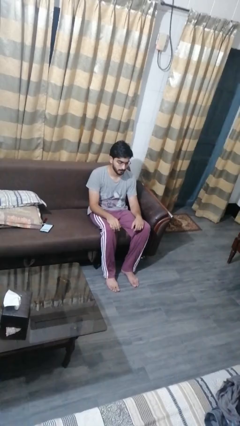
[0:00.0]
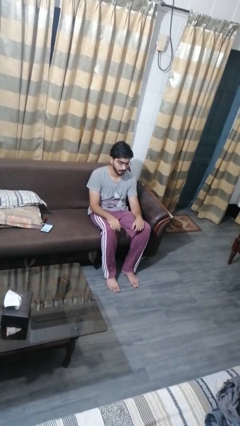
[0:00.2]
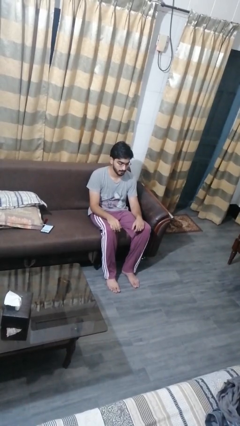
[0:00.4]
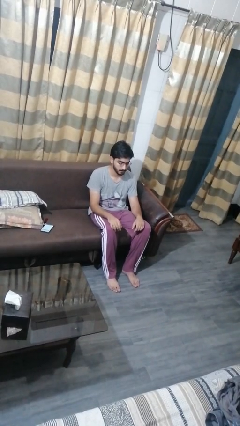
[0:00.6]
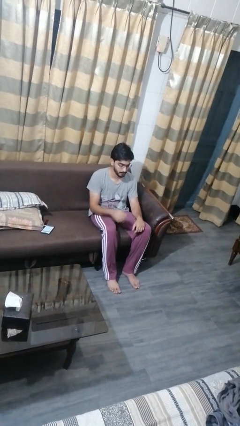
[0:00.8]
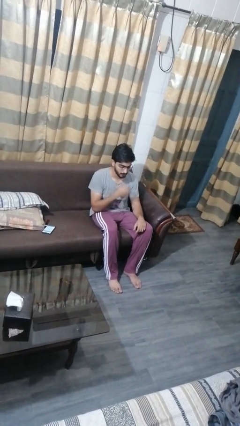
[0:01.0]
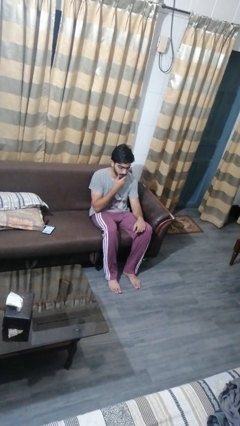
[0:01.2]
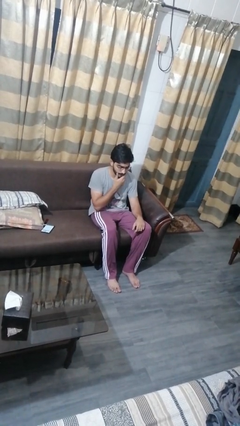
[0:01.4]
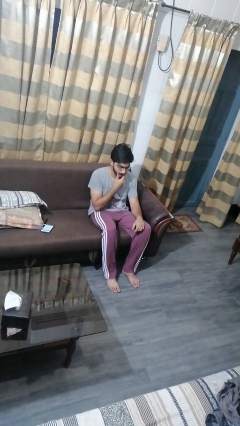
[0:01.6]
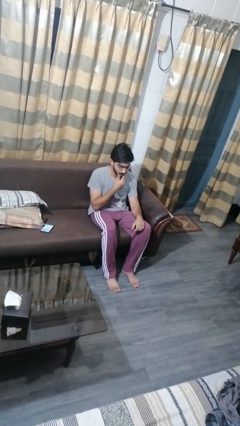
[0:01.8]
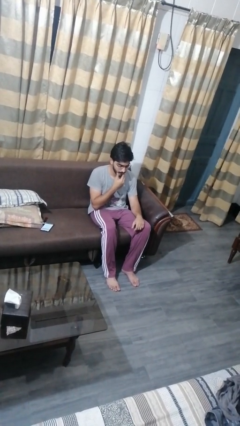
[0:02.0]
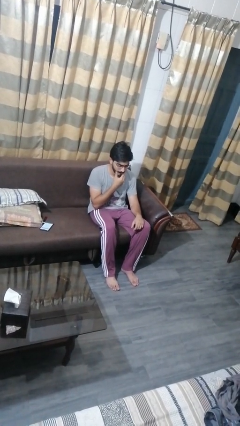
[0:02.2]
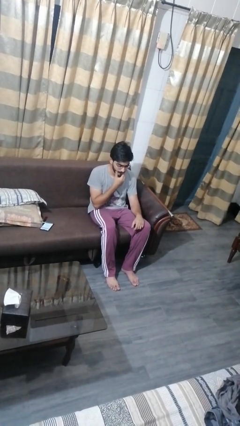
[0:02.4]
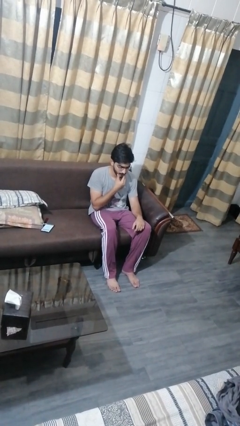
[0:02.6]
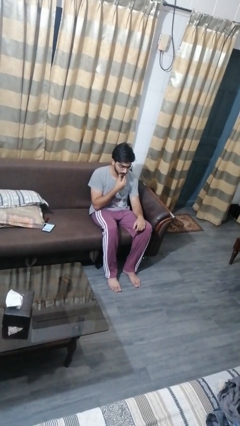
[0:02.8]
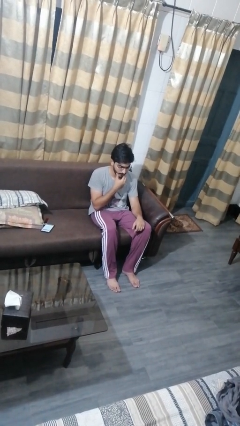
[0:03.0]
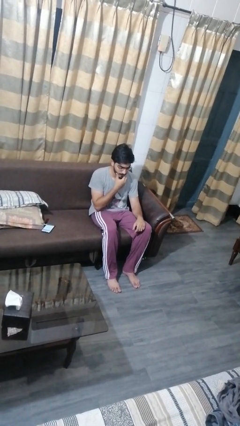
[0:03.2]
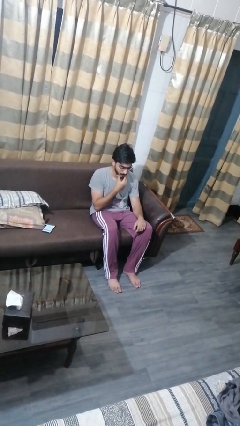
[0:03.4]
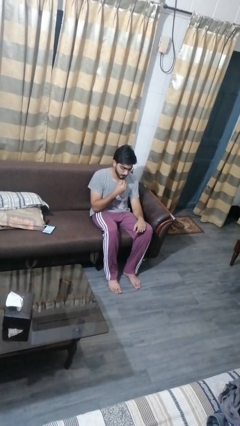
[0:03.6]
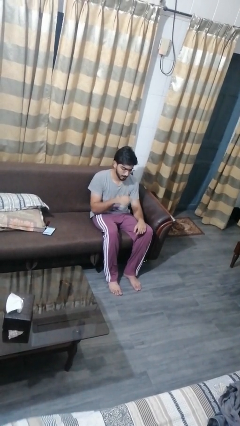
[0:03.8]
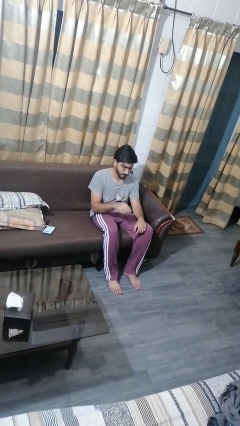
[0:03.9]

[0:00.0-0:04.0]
person strokes chin

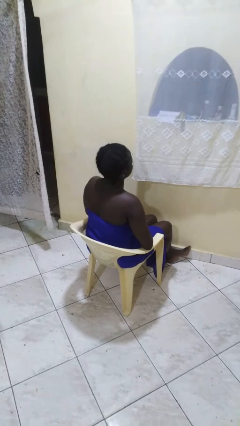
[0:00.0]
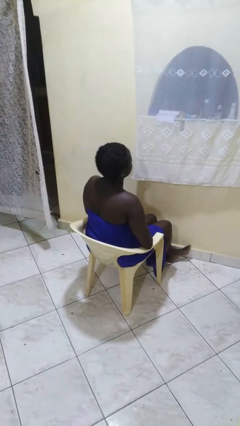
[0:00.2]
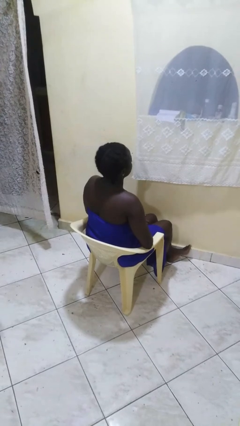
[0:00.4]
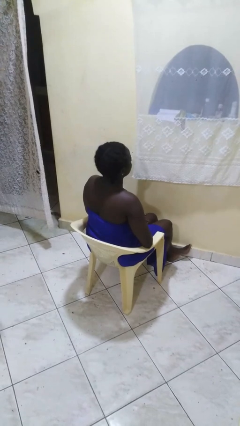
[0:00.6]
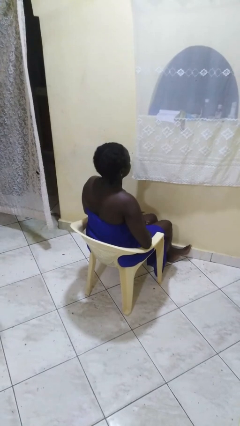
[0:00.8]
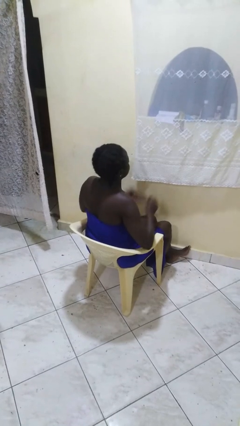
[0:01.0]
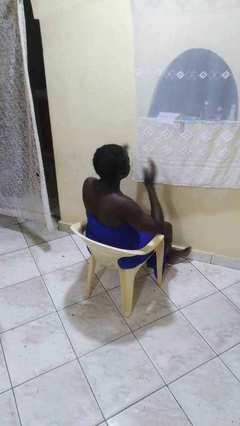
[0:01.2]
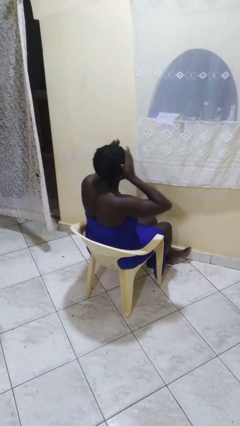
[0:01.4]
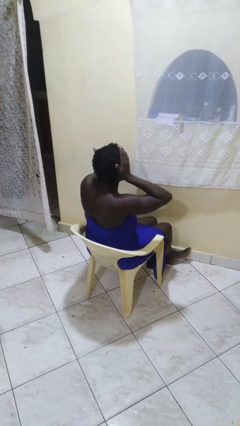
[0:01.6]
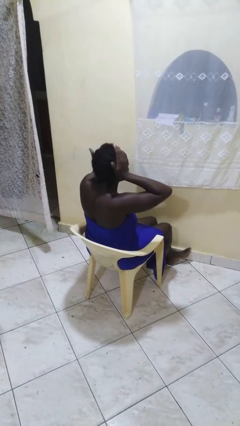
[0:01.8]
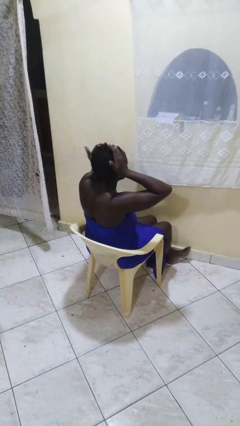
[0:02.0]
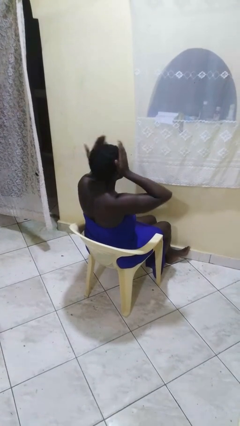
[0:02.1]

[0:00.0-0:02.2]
person strokes hair

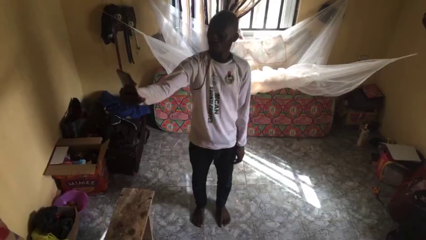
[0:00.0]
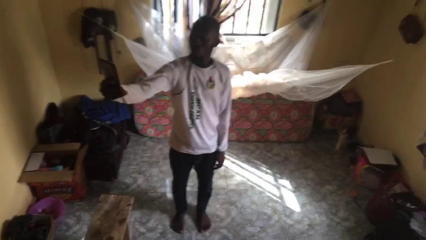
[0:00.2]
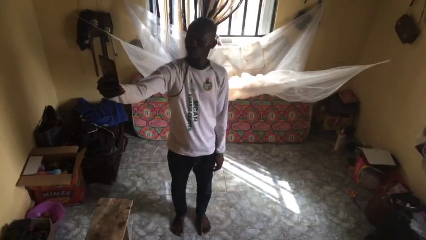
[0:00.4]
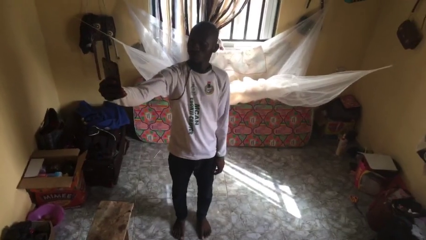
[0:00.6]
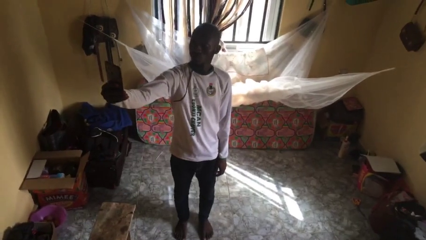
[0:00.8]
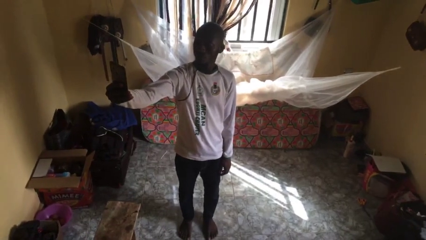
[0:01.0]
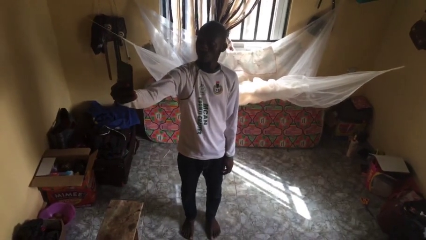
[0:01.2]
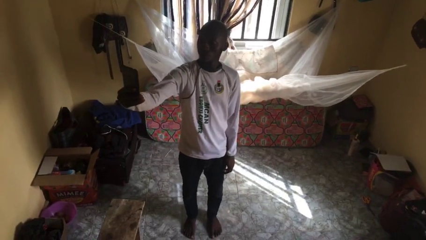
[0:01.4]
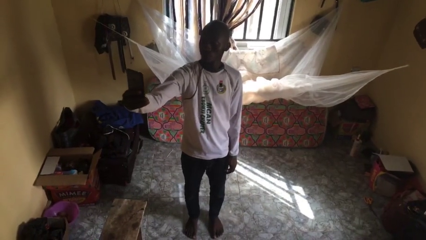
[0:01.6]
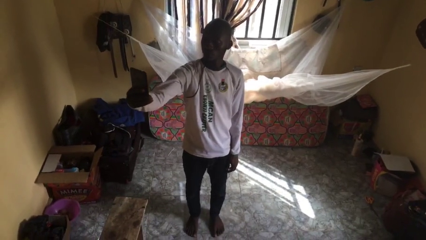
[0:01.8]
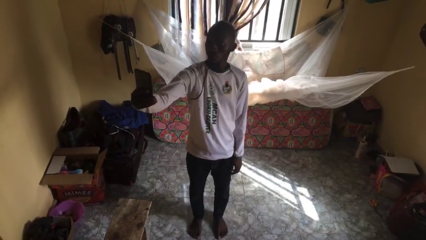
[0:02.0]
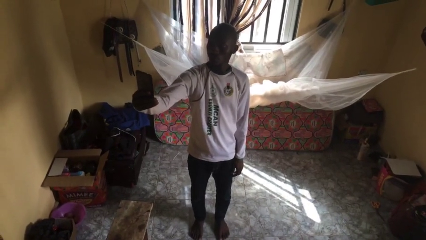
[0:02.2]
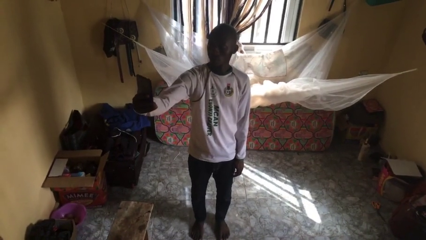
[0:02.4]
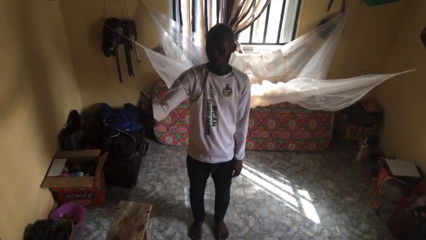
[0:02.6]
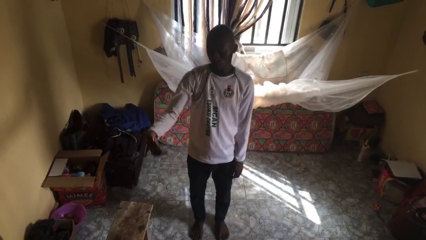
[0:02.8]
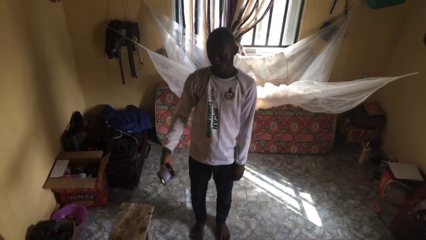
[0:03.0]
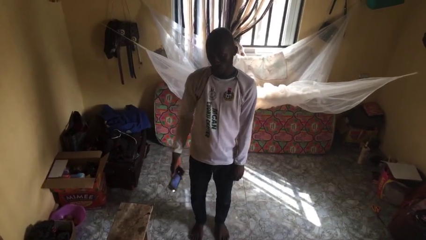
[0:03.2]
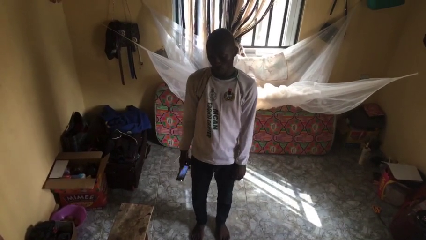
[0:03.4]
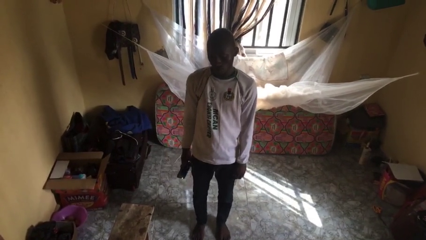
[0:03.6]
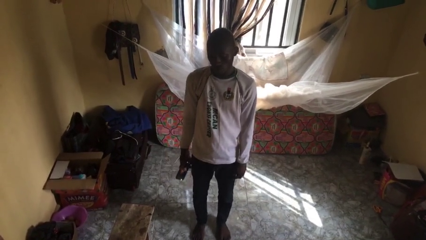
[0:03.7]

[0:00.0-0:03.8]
person takes selfie

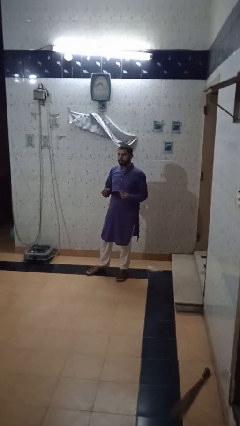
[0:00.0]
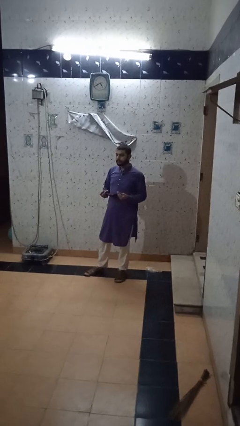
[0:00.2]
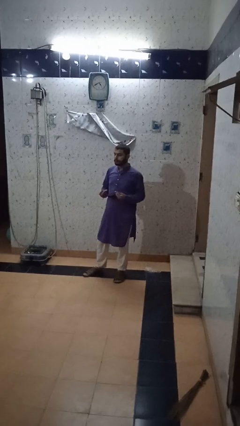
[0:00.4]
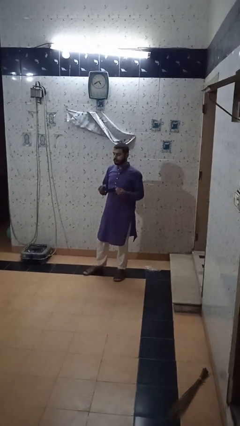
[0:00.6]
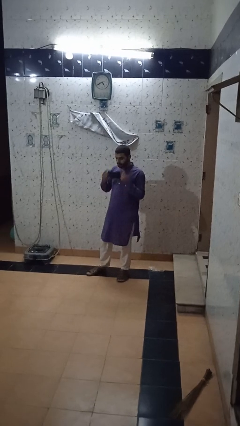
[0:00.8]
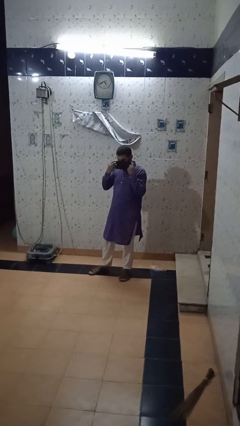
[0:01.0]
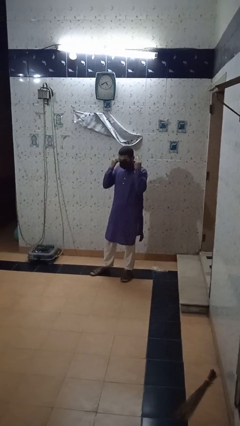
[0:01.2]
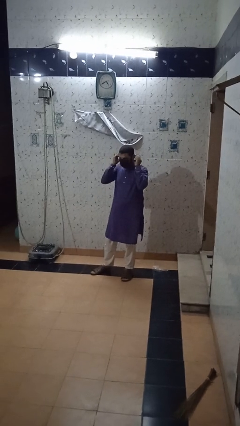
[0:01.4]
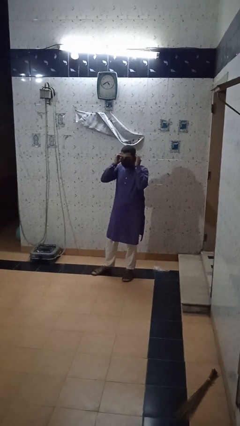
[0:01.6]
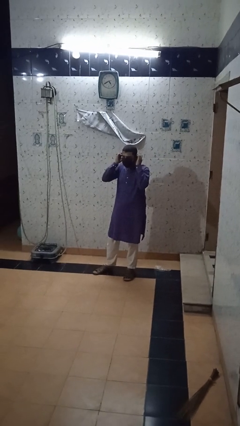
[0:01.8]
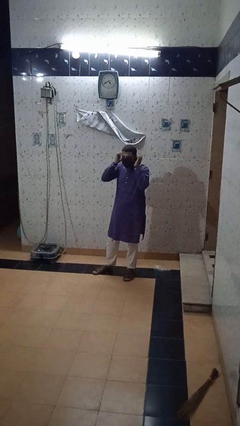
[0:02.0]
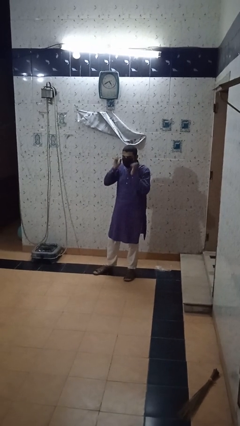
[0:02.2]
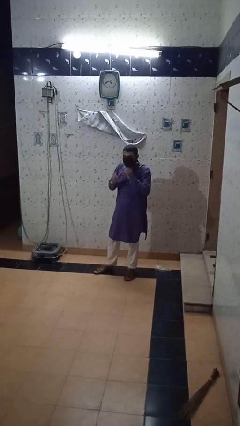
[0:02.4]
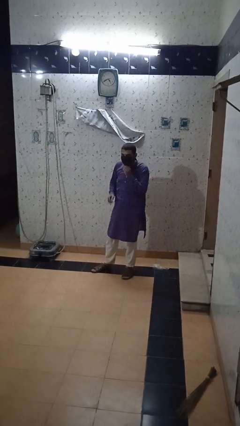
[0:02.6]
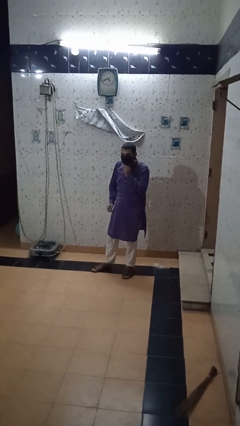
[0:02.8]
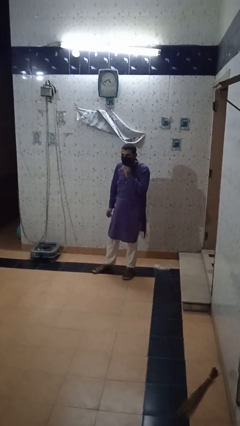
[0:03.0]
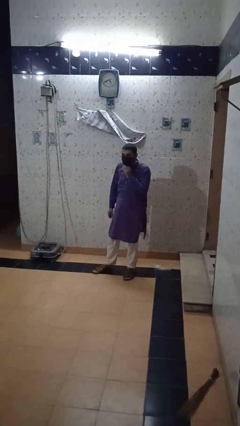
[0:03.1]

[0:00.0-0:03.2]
person puts on facemask

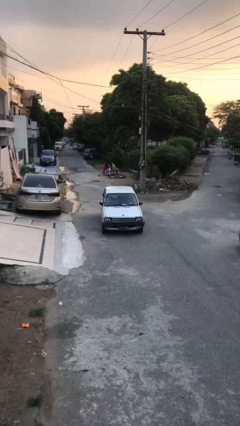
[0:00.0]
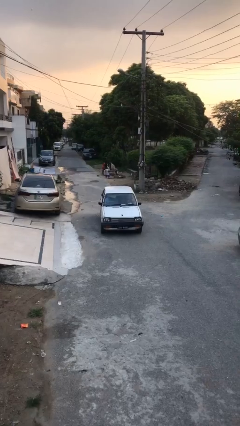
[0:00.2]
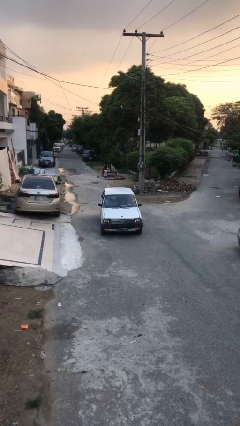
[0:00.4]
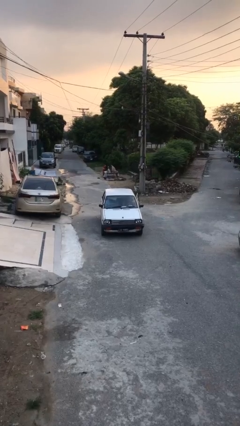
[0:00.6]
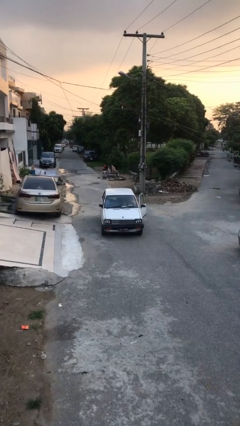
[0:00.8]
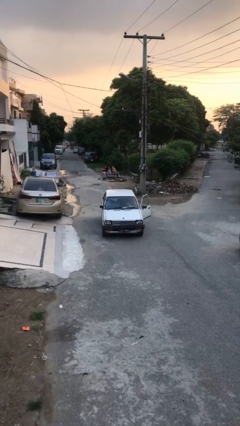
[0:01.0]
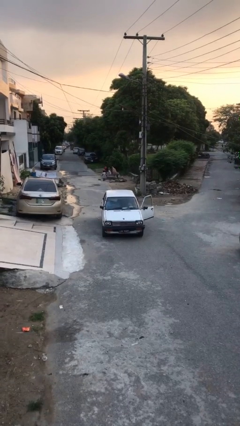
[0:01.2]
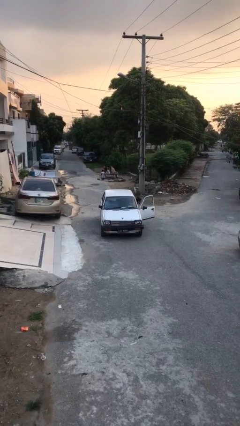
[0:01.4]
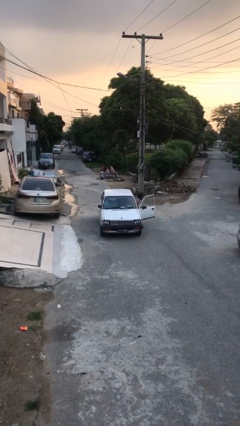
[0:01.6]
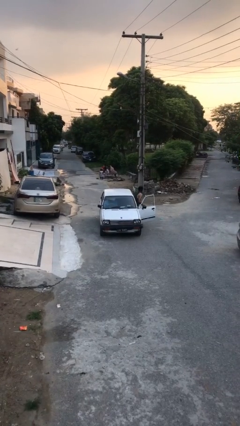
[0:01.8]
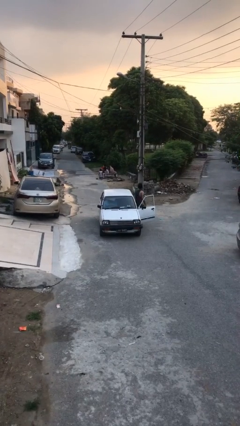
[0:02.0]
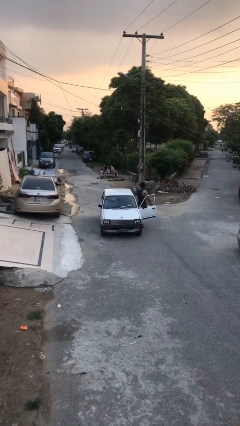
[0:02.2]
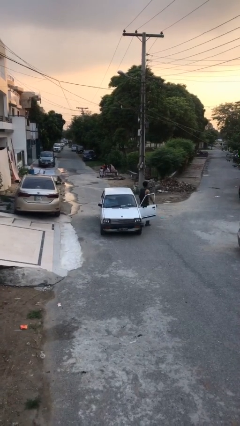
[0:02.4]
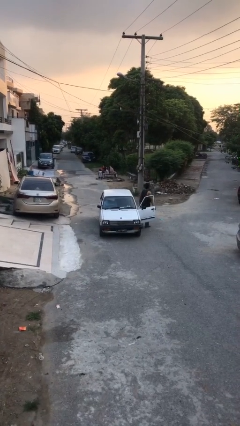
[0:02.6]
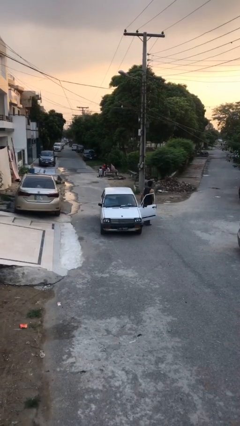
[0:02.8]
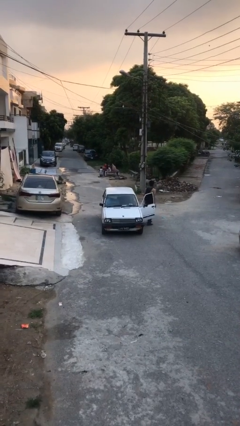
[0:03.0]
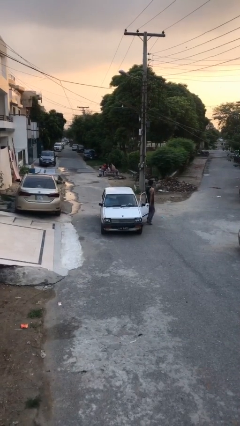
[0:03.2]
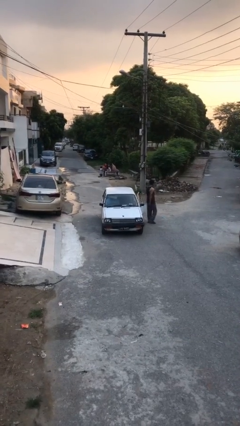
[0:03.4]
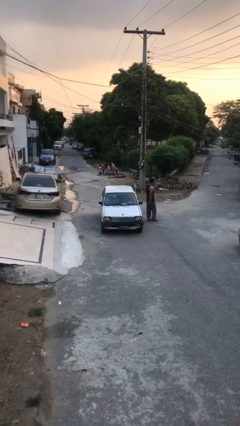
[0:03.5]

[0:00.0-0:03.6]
car drops off person

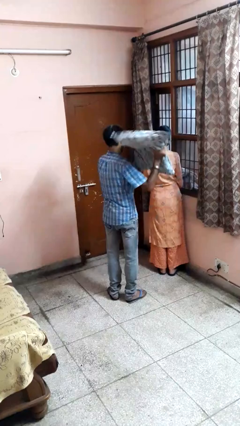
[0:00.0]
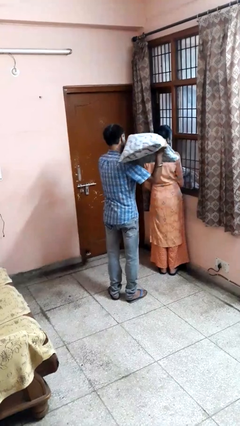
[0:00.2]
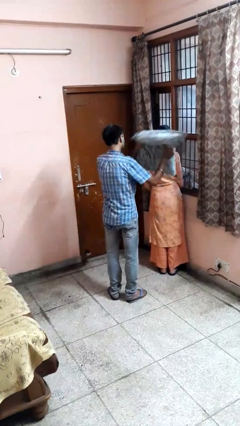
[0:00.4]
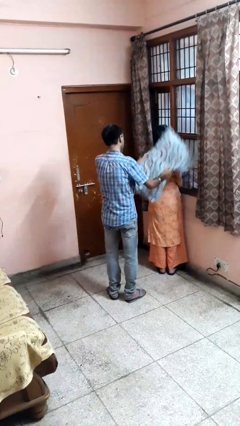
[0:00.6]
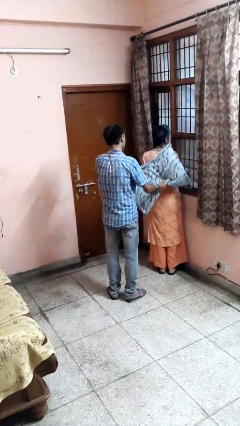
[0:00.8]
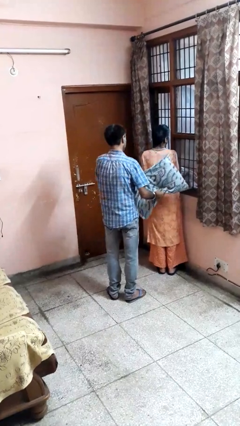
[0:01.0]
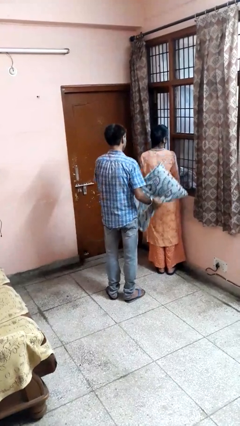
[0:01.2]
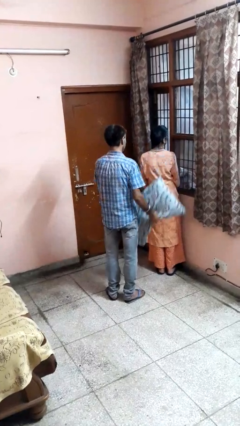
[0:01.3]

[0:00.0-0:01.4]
person hits person with pillow
